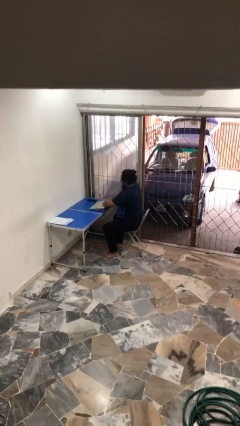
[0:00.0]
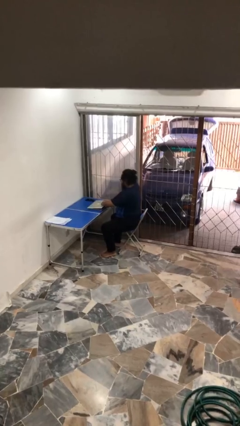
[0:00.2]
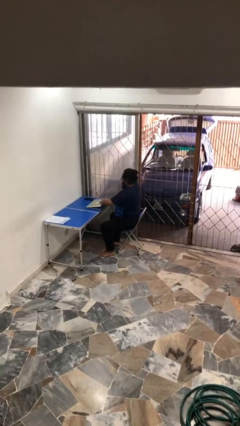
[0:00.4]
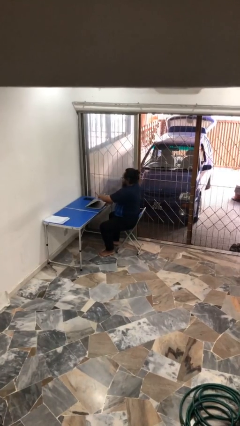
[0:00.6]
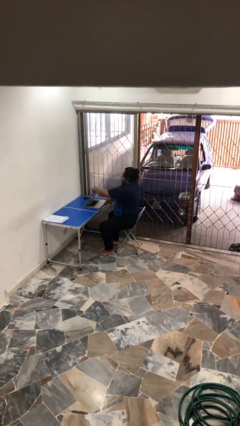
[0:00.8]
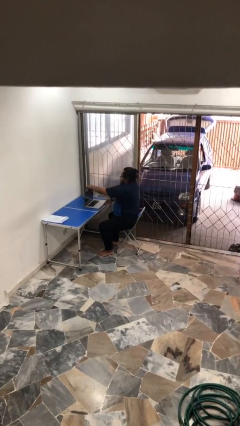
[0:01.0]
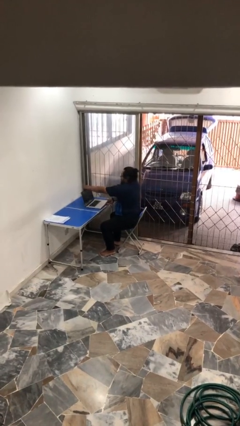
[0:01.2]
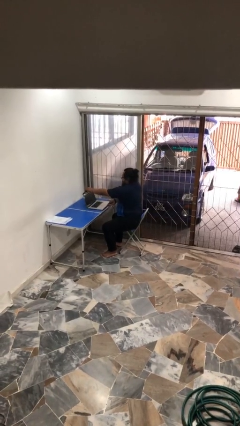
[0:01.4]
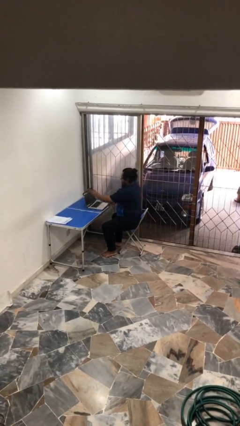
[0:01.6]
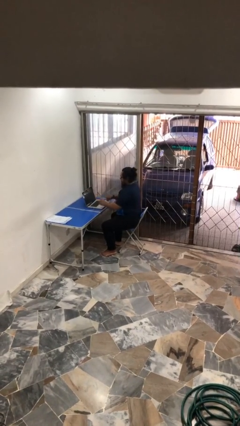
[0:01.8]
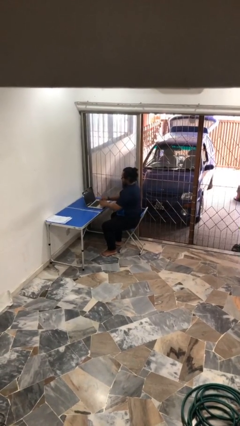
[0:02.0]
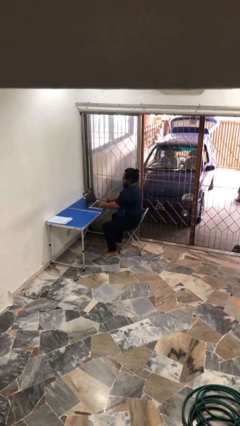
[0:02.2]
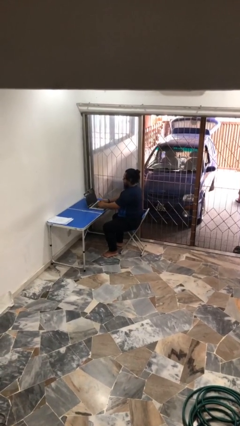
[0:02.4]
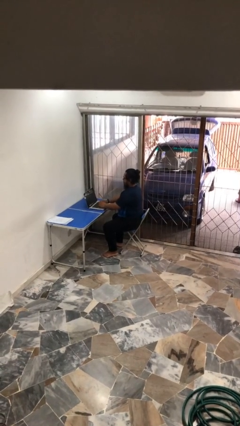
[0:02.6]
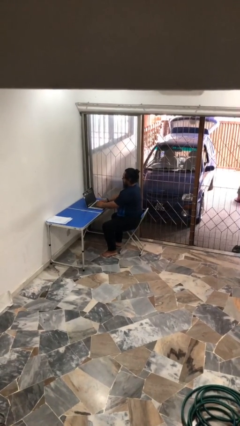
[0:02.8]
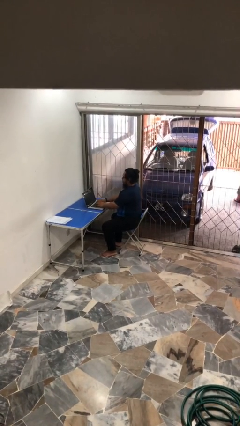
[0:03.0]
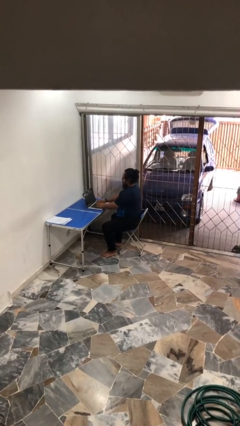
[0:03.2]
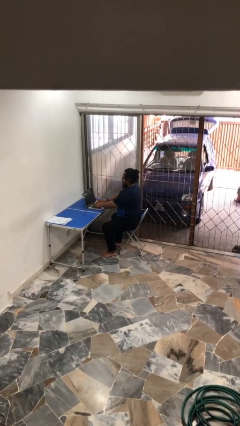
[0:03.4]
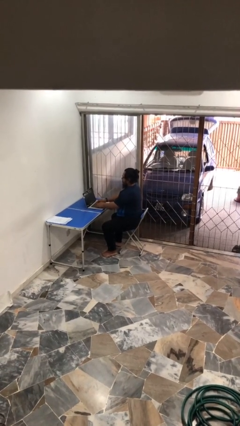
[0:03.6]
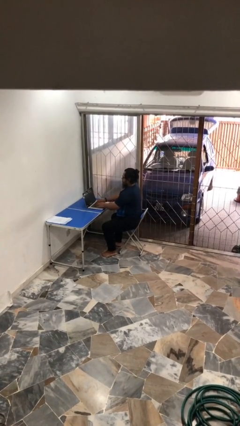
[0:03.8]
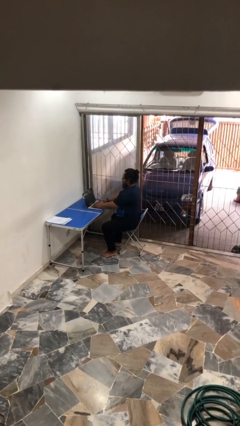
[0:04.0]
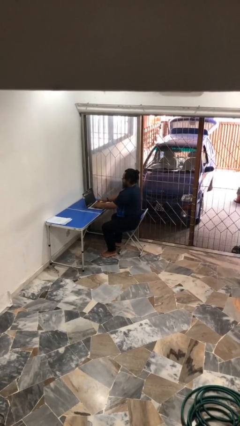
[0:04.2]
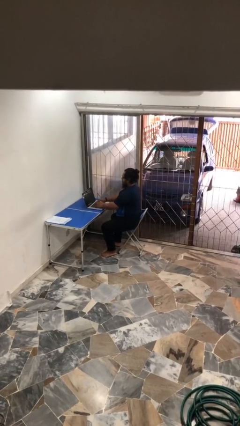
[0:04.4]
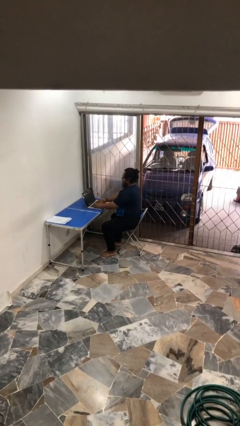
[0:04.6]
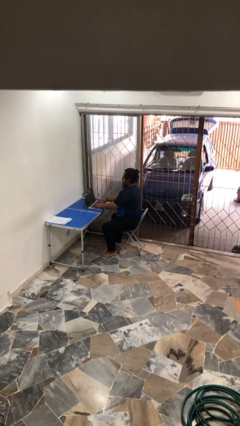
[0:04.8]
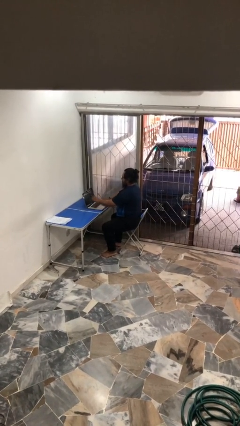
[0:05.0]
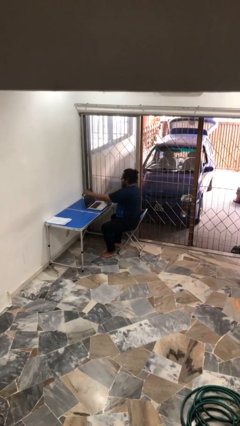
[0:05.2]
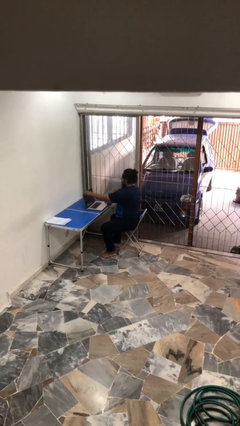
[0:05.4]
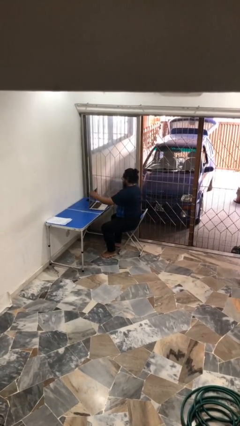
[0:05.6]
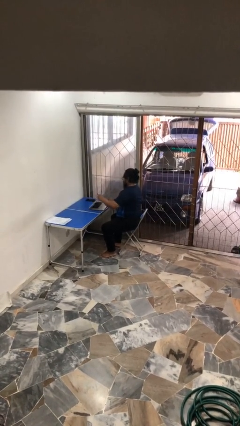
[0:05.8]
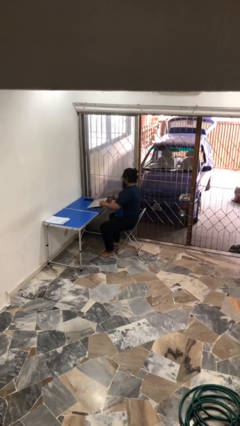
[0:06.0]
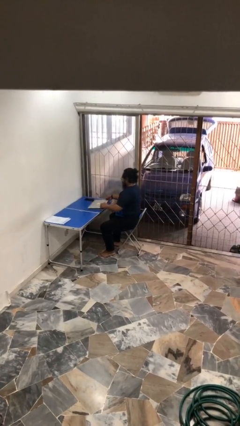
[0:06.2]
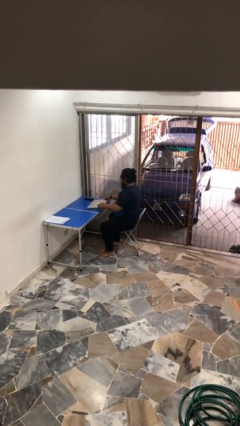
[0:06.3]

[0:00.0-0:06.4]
person interacts with laptop

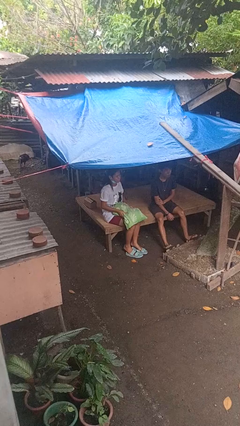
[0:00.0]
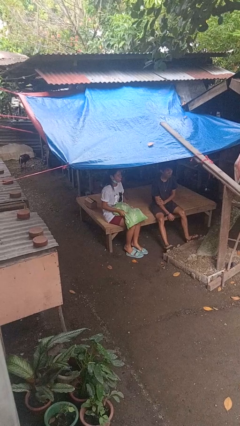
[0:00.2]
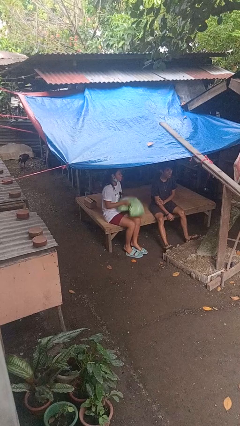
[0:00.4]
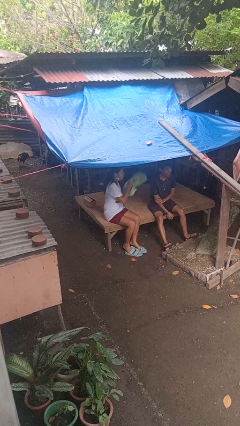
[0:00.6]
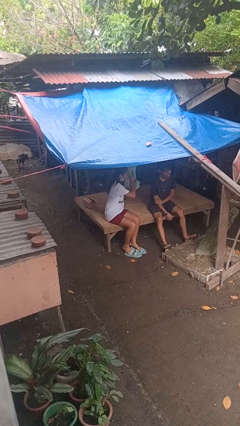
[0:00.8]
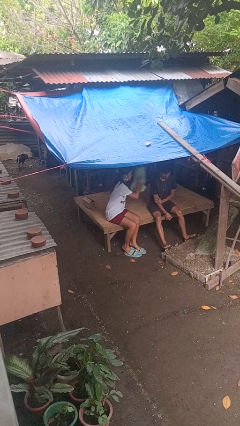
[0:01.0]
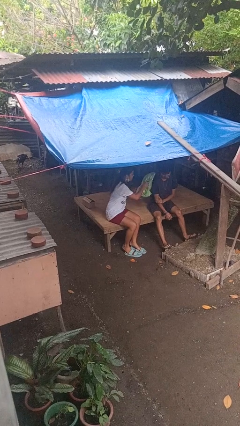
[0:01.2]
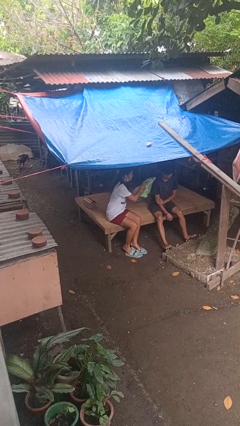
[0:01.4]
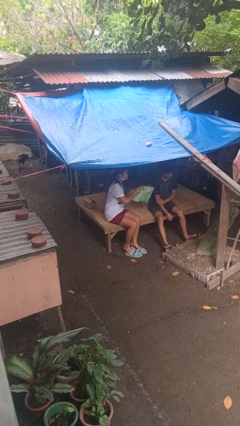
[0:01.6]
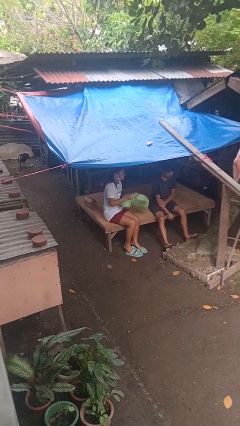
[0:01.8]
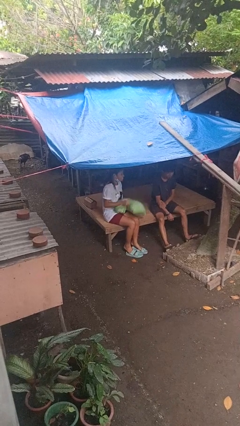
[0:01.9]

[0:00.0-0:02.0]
person hits person with pillow

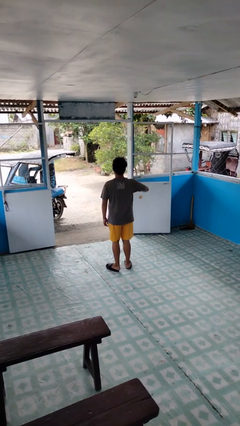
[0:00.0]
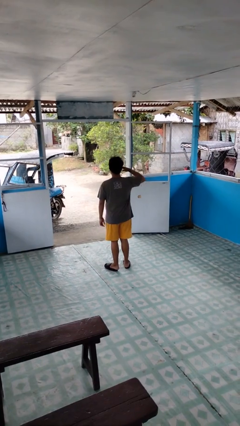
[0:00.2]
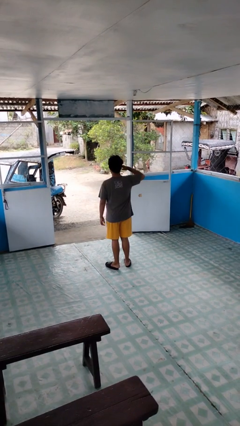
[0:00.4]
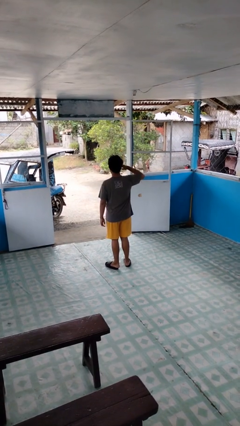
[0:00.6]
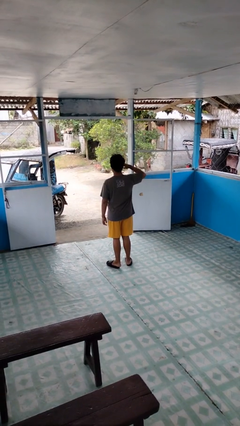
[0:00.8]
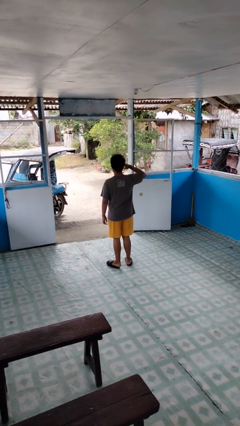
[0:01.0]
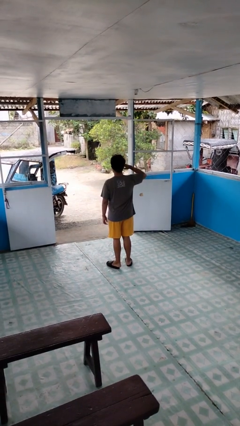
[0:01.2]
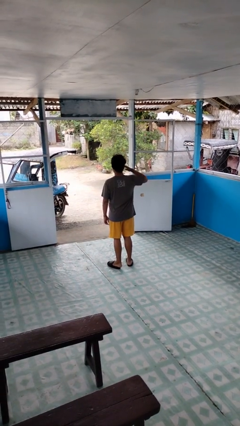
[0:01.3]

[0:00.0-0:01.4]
person salutes

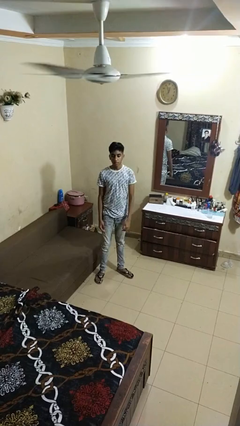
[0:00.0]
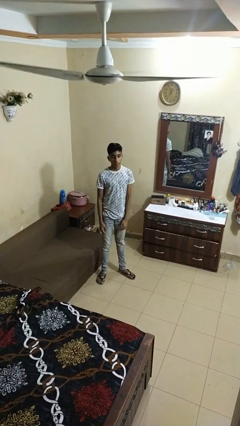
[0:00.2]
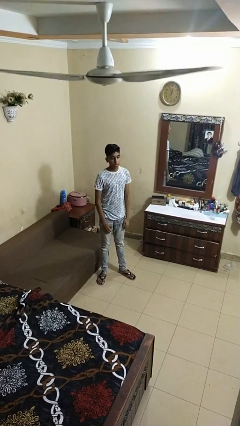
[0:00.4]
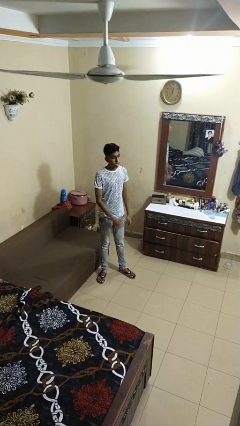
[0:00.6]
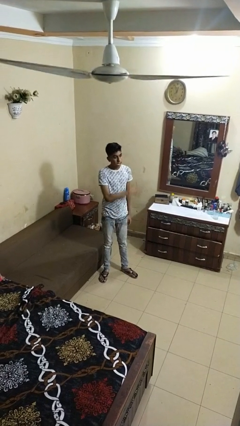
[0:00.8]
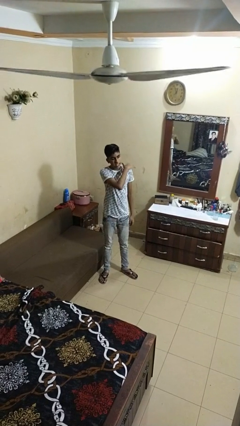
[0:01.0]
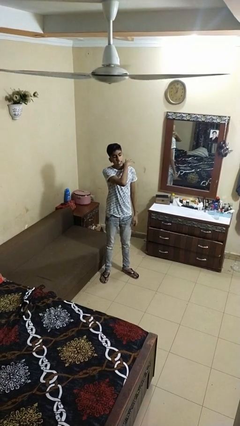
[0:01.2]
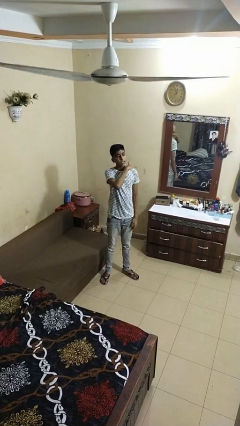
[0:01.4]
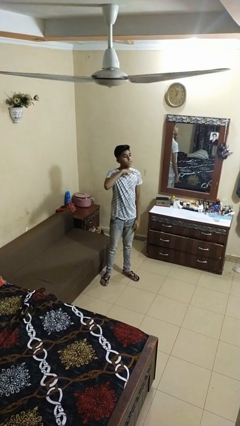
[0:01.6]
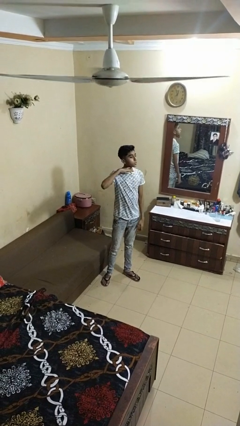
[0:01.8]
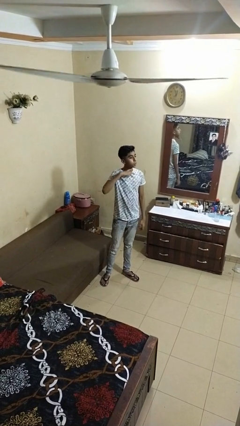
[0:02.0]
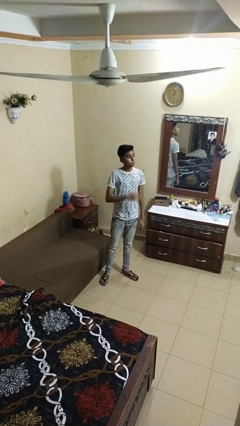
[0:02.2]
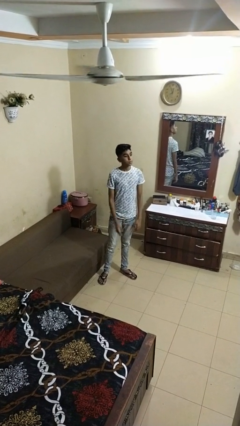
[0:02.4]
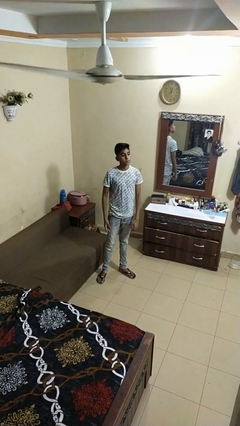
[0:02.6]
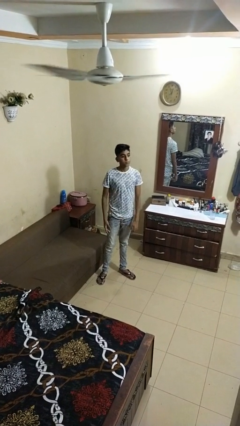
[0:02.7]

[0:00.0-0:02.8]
person gestures cut

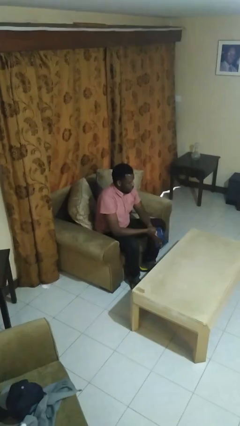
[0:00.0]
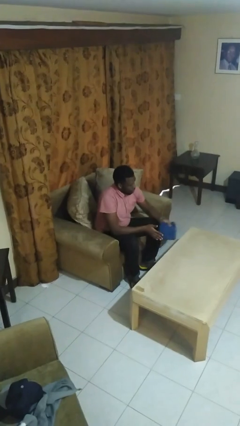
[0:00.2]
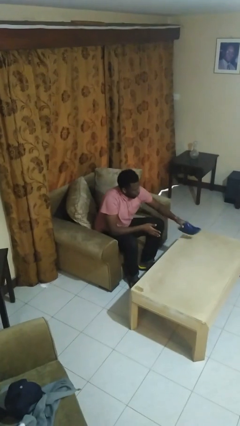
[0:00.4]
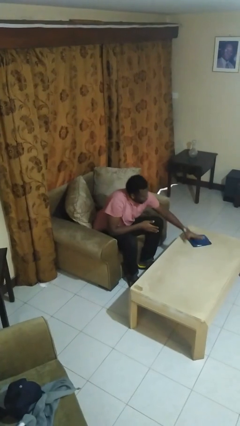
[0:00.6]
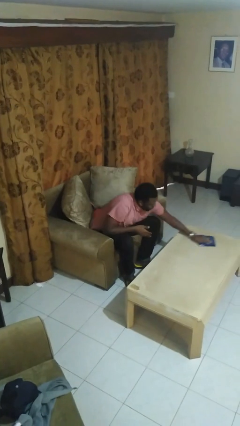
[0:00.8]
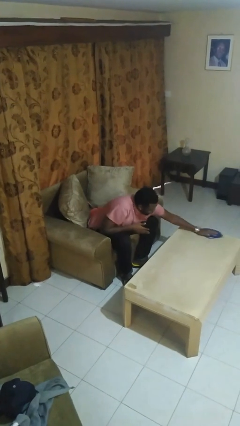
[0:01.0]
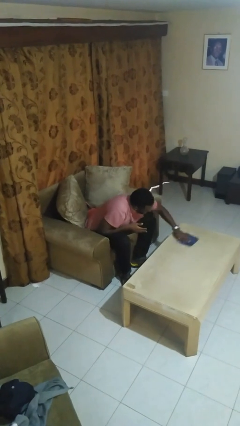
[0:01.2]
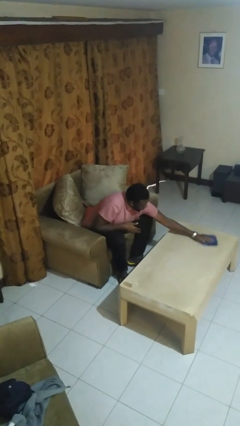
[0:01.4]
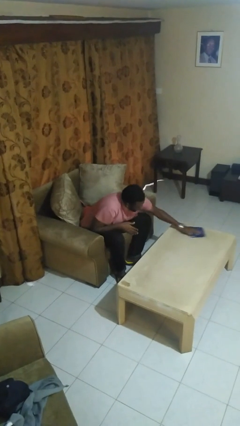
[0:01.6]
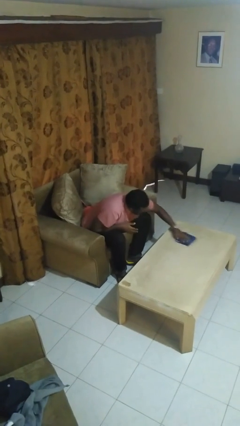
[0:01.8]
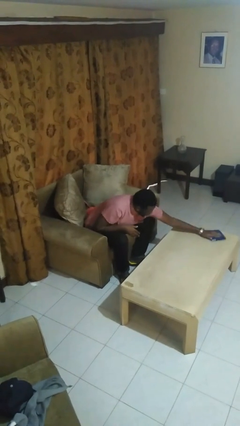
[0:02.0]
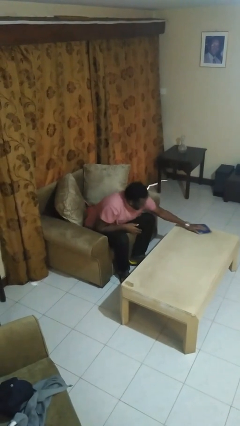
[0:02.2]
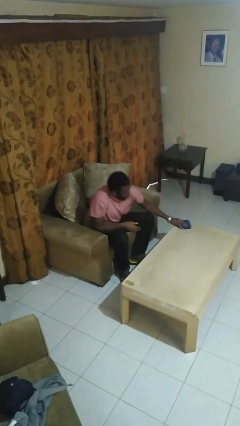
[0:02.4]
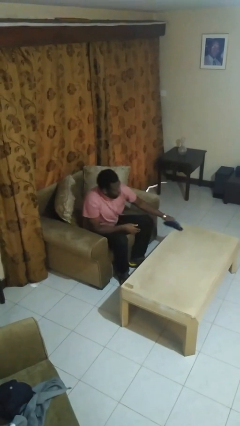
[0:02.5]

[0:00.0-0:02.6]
person cleans table with rag

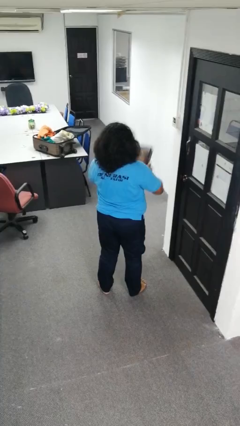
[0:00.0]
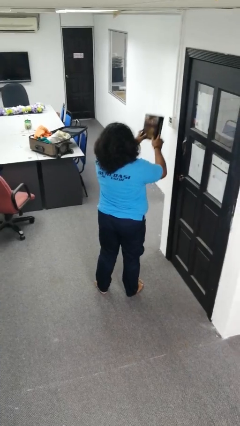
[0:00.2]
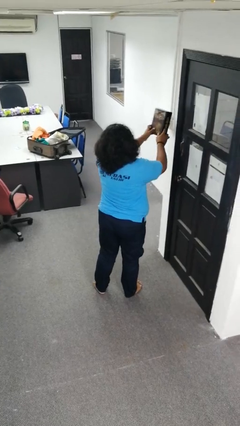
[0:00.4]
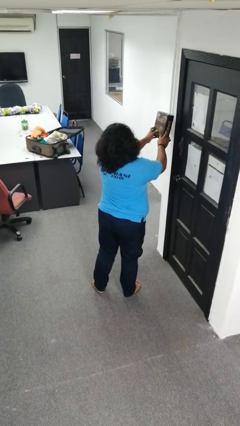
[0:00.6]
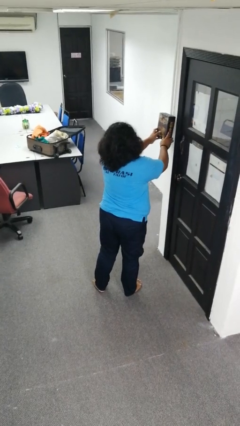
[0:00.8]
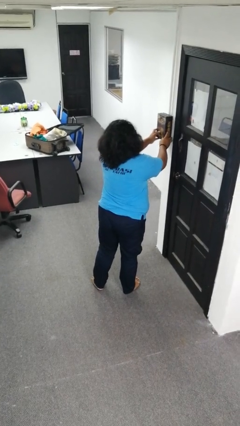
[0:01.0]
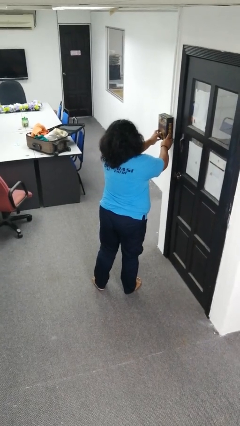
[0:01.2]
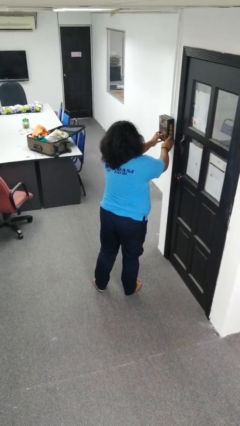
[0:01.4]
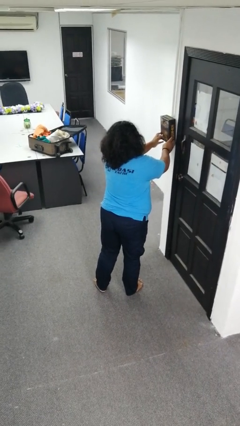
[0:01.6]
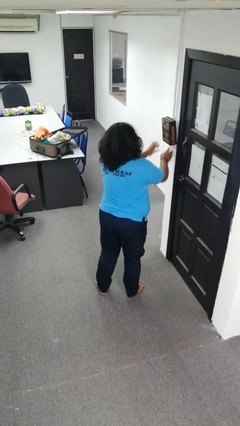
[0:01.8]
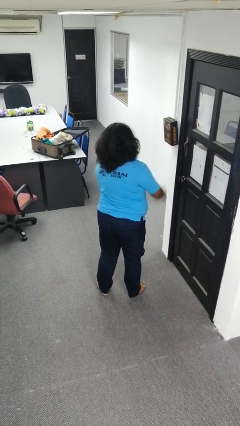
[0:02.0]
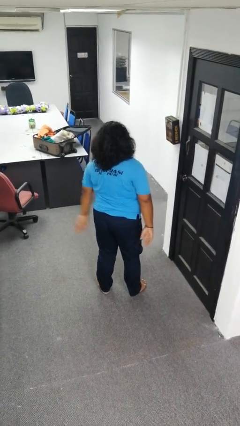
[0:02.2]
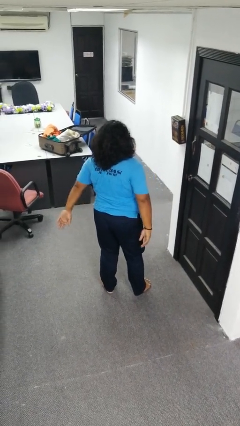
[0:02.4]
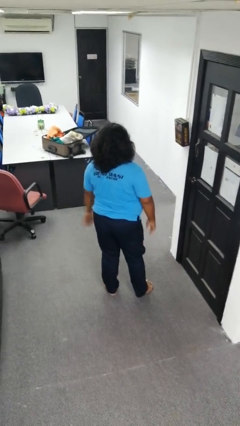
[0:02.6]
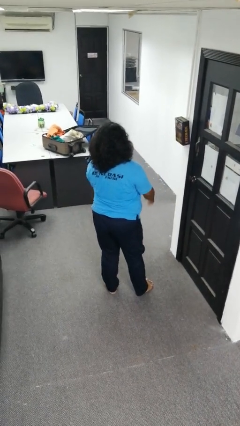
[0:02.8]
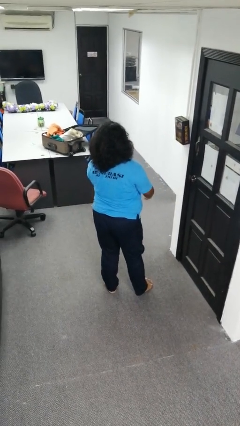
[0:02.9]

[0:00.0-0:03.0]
person puts up picture frame
